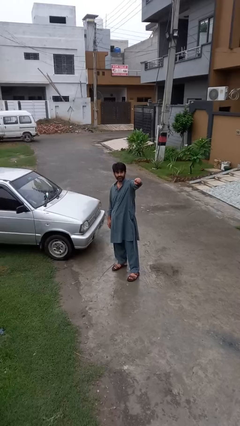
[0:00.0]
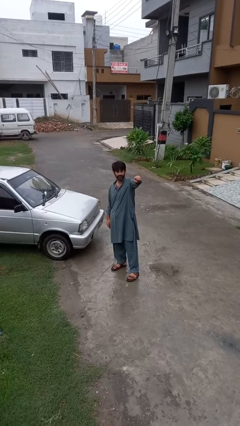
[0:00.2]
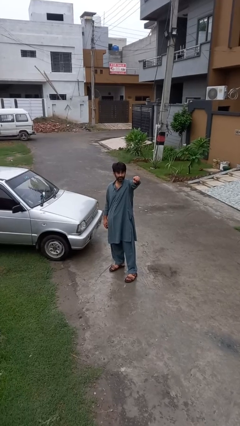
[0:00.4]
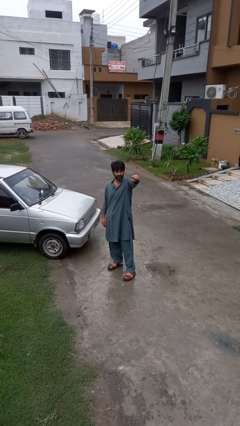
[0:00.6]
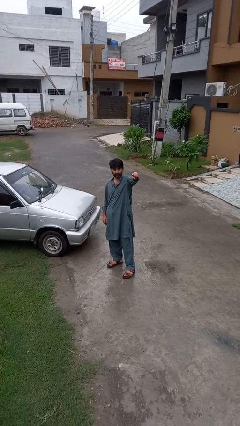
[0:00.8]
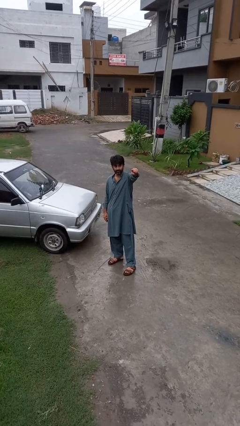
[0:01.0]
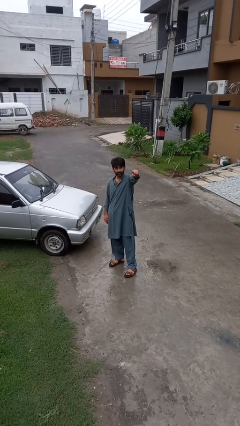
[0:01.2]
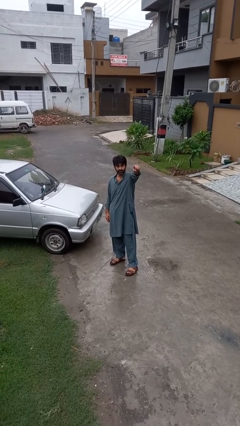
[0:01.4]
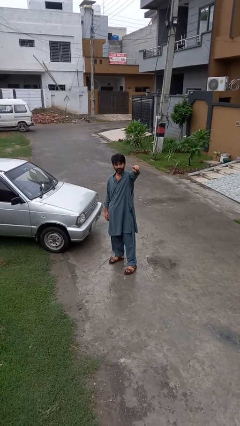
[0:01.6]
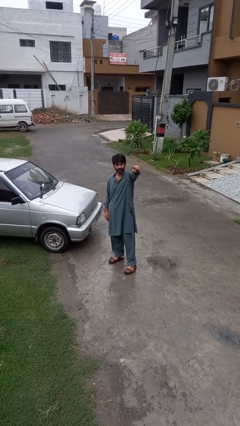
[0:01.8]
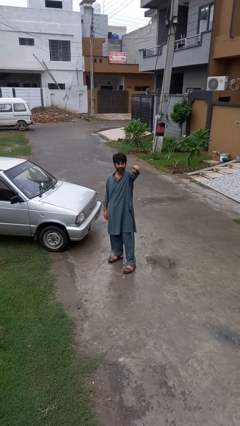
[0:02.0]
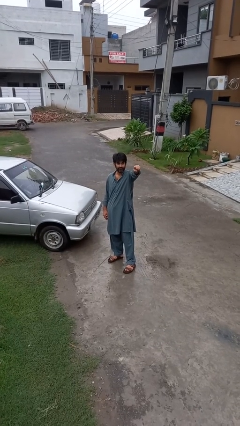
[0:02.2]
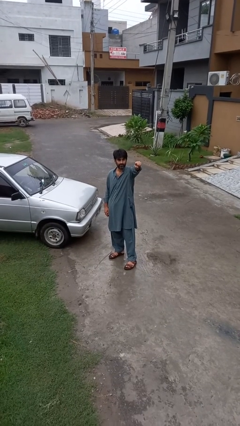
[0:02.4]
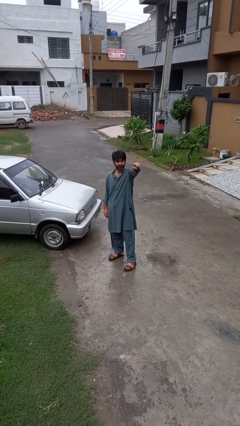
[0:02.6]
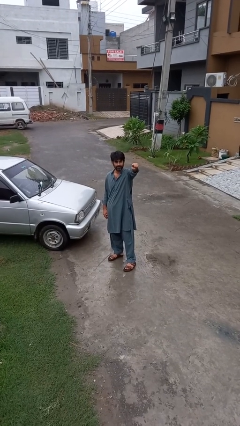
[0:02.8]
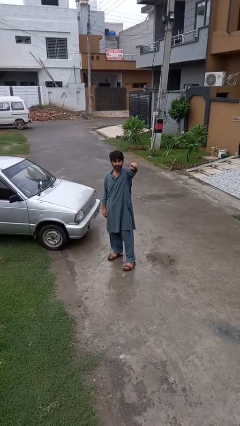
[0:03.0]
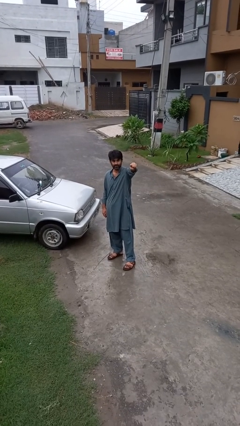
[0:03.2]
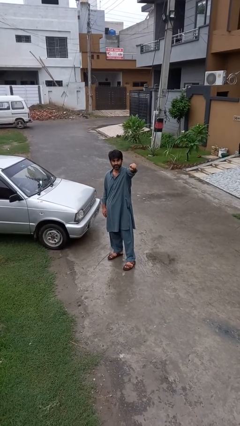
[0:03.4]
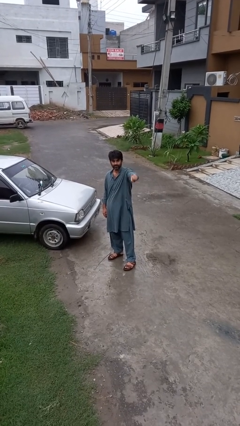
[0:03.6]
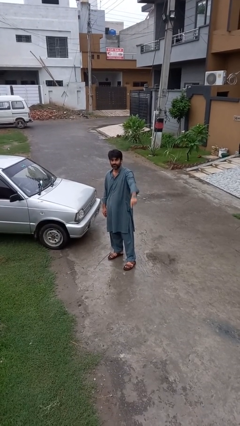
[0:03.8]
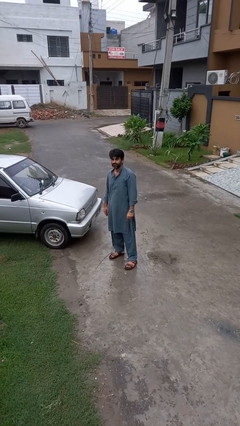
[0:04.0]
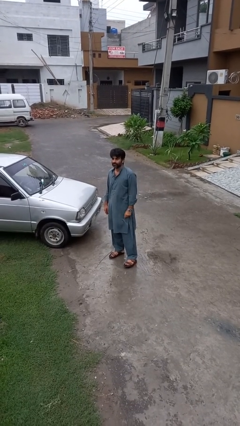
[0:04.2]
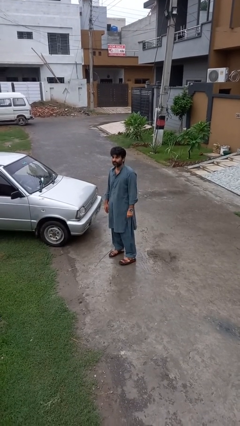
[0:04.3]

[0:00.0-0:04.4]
person points at person

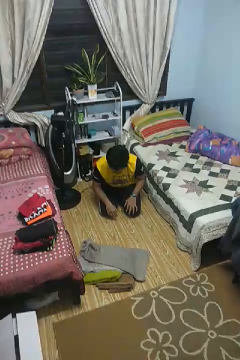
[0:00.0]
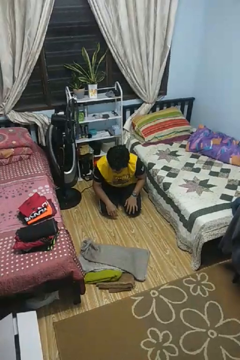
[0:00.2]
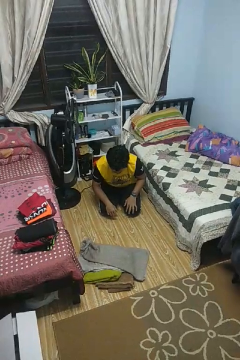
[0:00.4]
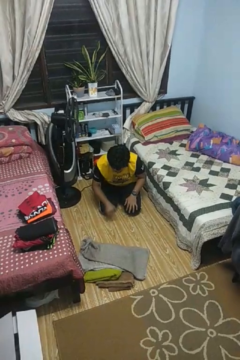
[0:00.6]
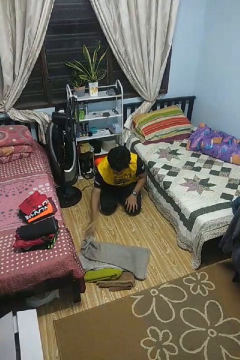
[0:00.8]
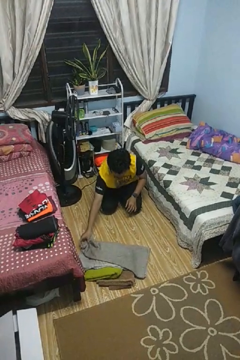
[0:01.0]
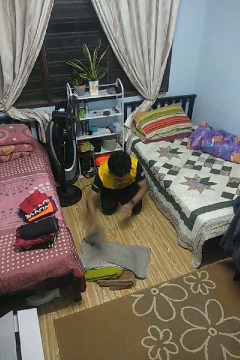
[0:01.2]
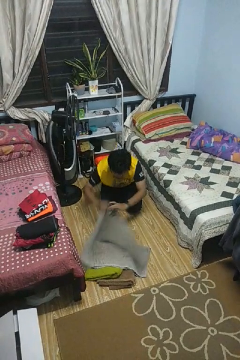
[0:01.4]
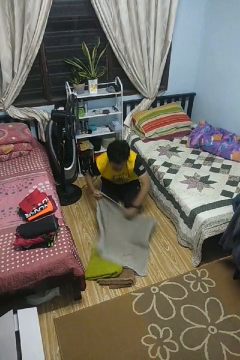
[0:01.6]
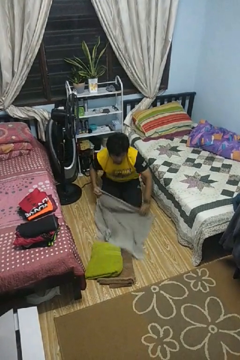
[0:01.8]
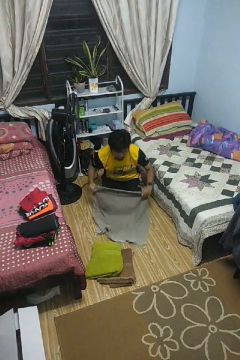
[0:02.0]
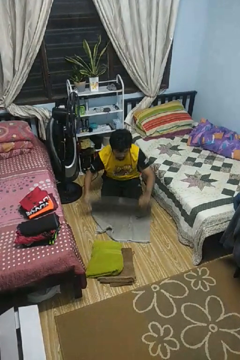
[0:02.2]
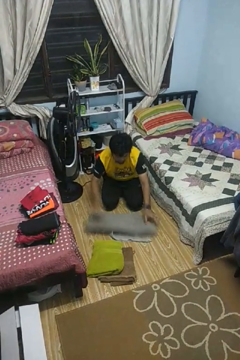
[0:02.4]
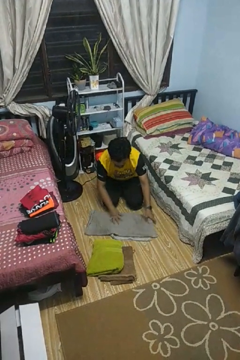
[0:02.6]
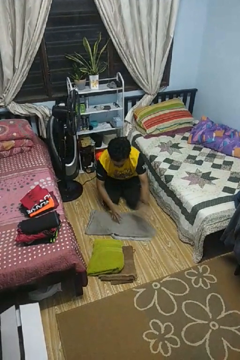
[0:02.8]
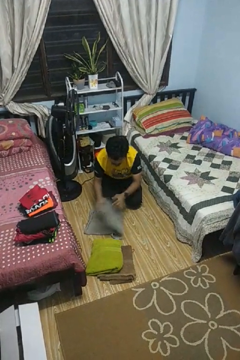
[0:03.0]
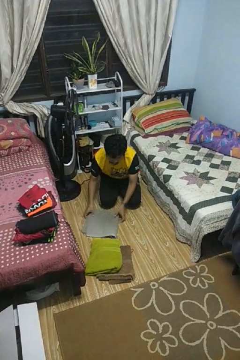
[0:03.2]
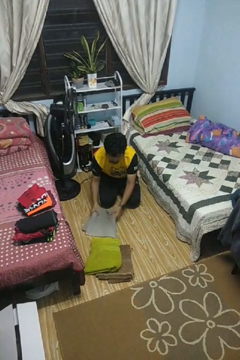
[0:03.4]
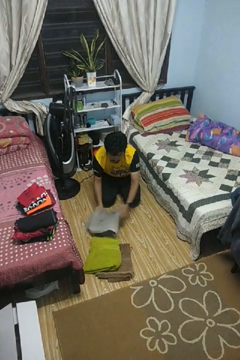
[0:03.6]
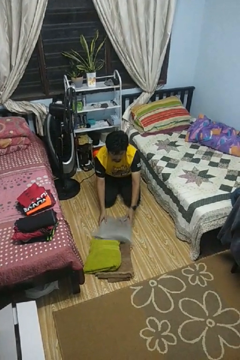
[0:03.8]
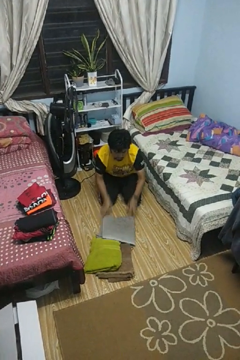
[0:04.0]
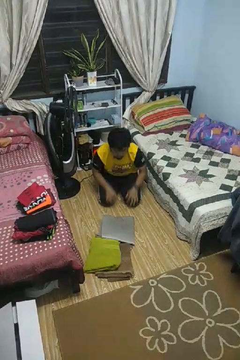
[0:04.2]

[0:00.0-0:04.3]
person folds towel

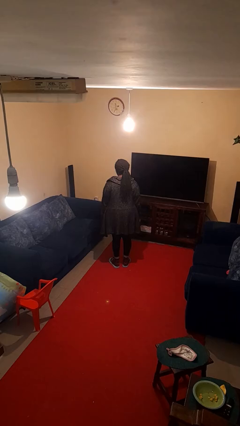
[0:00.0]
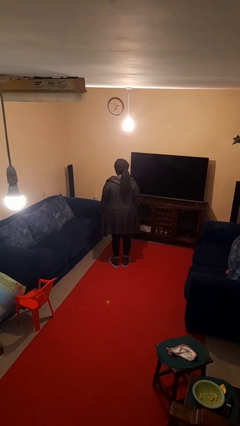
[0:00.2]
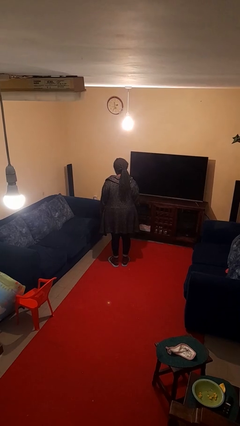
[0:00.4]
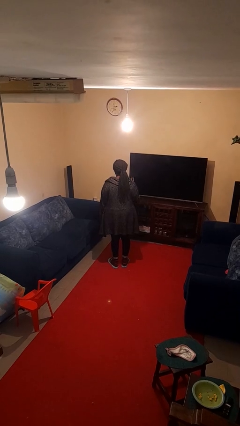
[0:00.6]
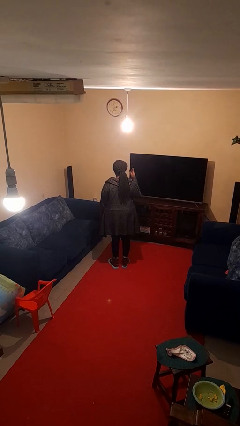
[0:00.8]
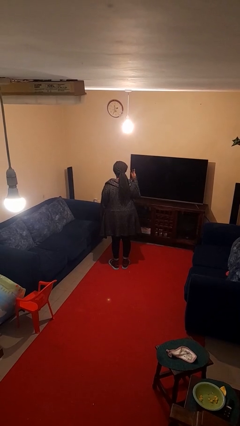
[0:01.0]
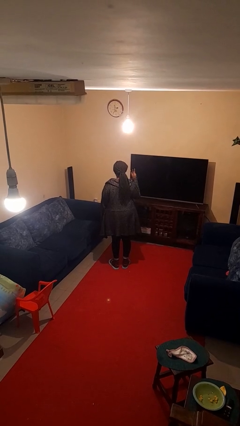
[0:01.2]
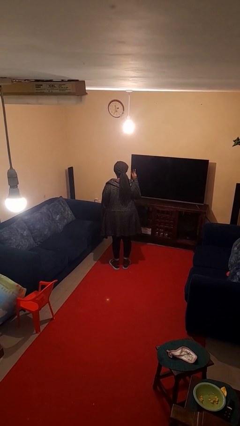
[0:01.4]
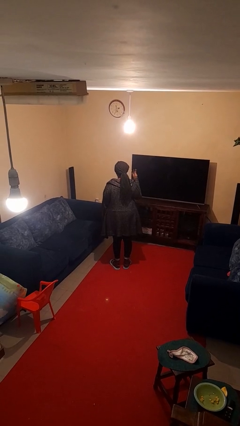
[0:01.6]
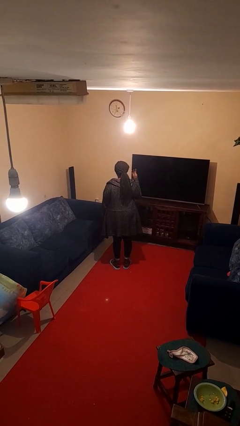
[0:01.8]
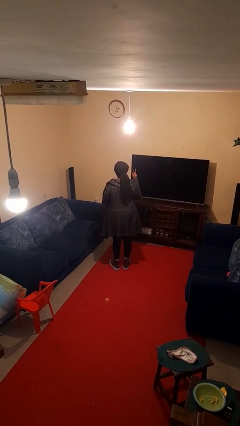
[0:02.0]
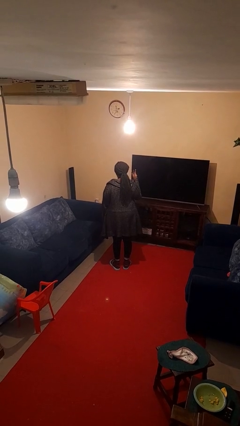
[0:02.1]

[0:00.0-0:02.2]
person gestures number three

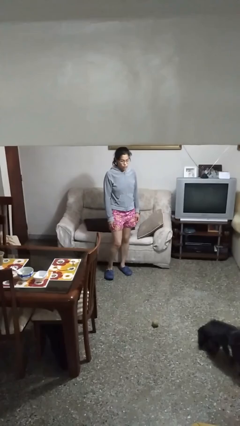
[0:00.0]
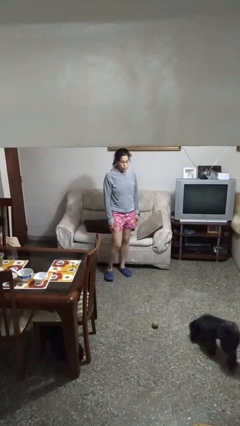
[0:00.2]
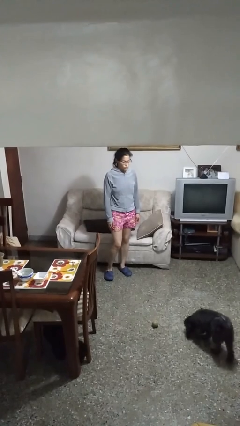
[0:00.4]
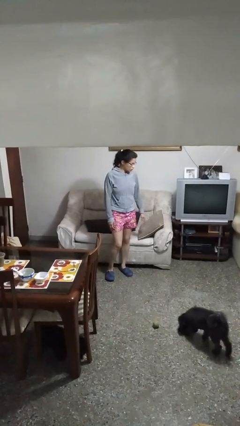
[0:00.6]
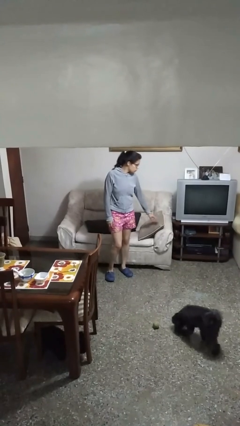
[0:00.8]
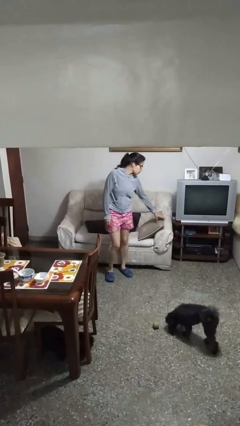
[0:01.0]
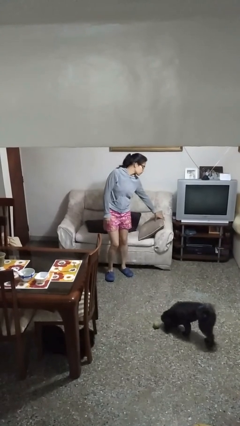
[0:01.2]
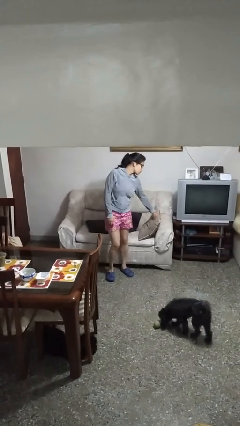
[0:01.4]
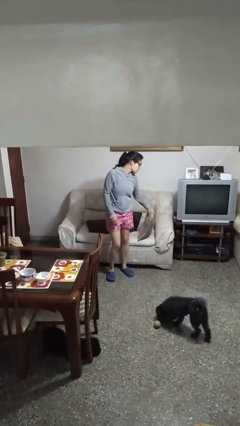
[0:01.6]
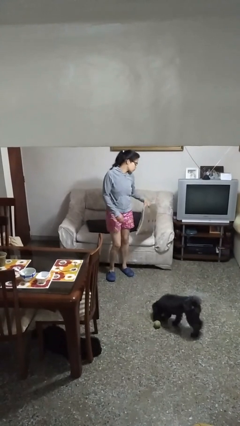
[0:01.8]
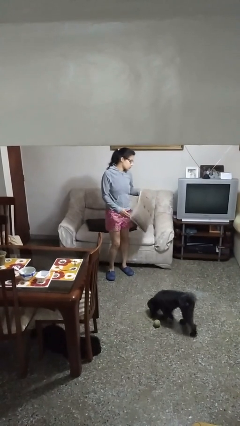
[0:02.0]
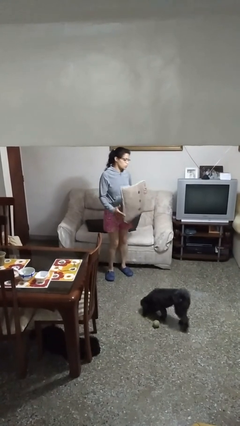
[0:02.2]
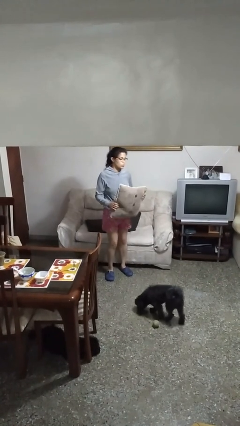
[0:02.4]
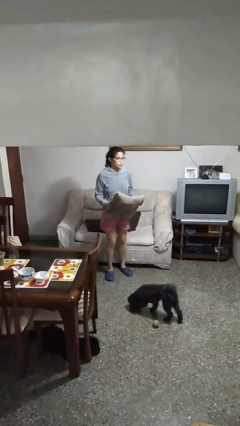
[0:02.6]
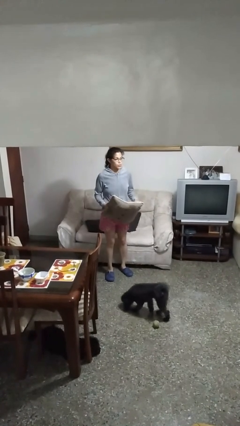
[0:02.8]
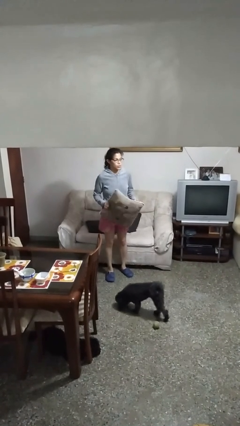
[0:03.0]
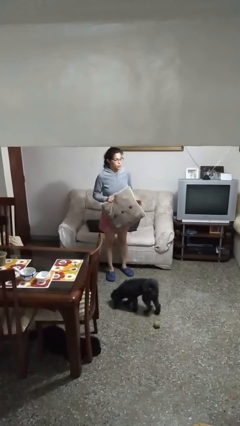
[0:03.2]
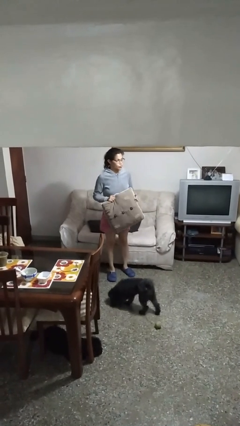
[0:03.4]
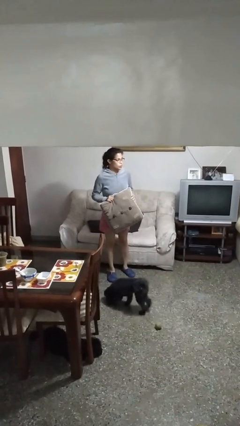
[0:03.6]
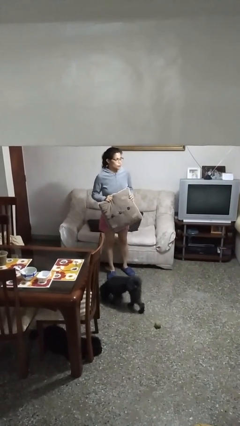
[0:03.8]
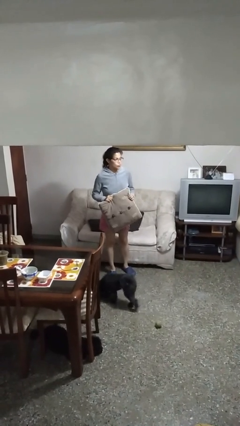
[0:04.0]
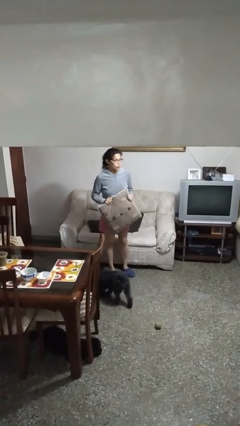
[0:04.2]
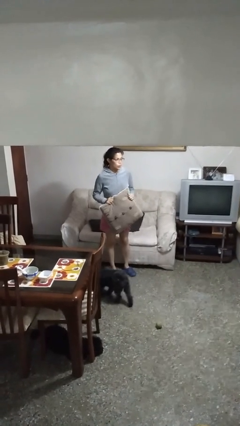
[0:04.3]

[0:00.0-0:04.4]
person picks up object from couch

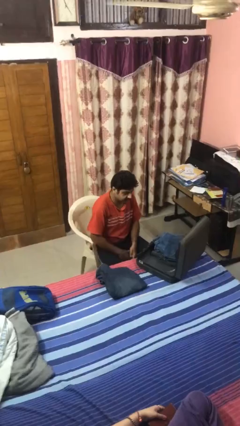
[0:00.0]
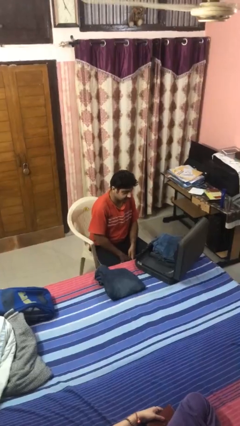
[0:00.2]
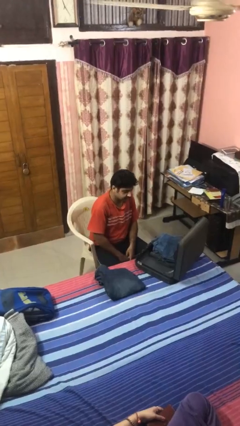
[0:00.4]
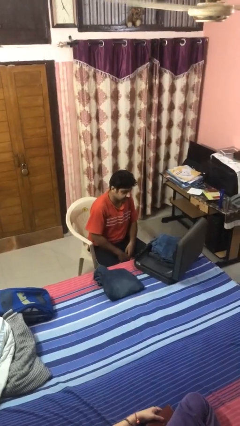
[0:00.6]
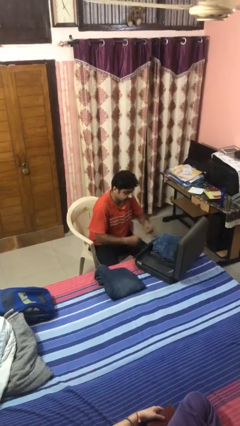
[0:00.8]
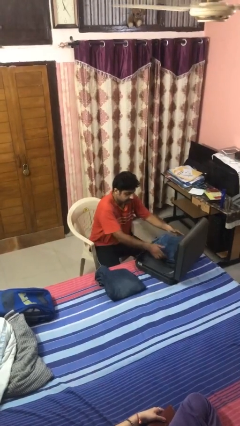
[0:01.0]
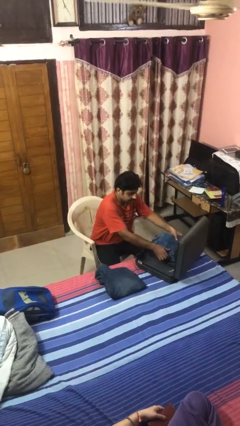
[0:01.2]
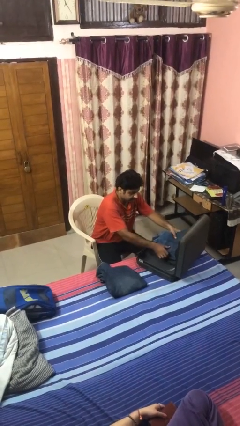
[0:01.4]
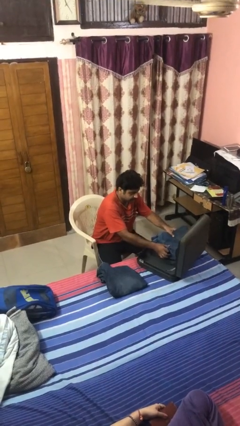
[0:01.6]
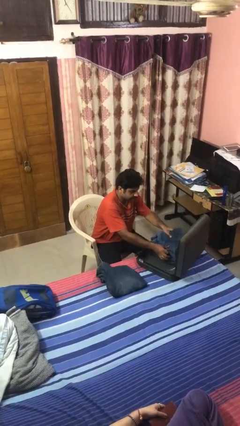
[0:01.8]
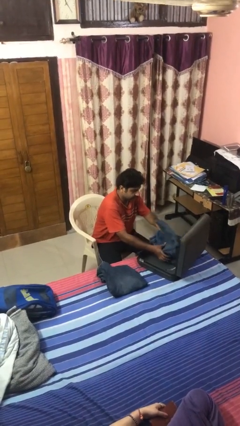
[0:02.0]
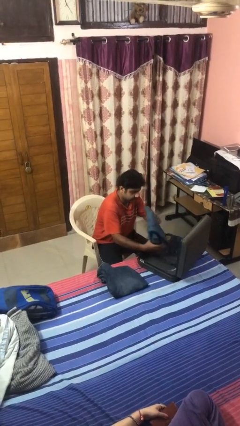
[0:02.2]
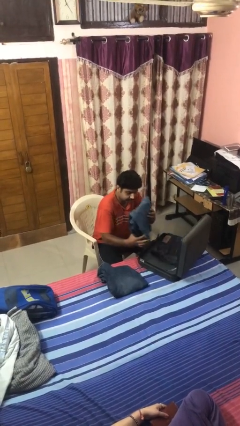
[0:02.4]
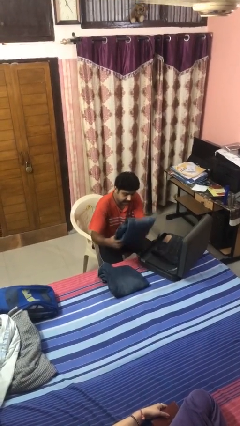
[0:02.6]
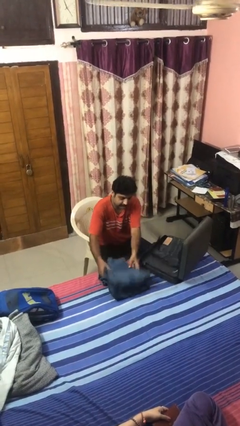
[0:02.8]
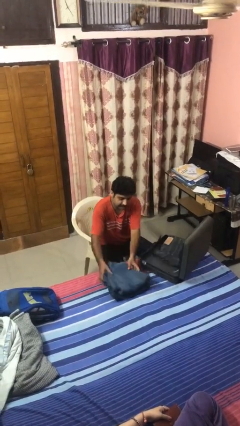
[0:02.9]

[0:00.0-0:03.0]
person unloads clothes from suitcase
